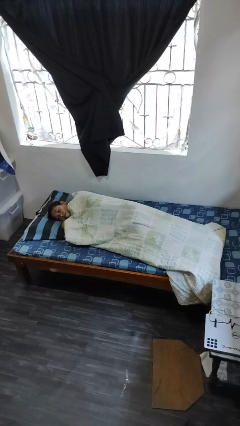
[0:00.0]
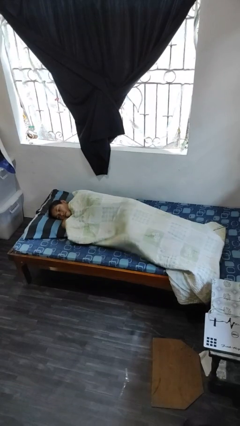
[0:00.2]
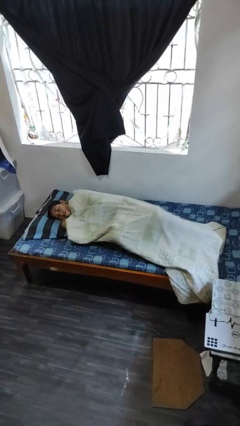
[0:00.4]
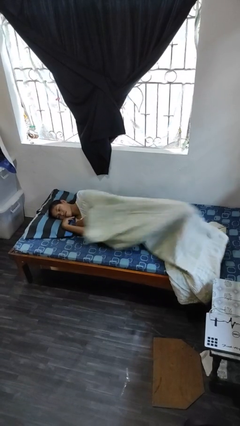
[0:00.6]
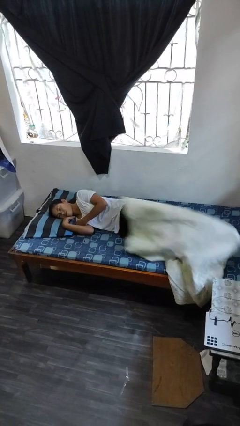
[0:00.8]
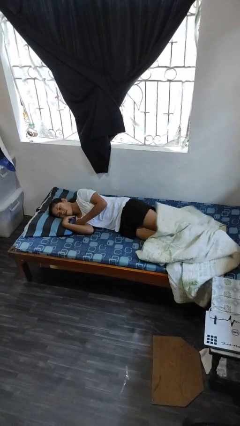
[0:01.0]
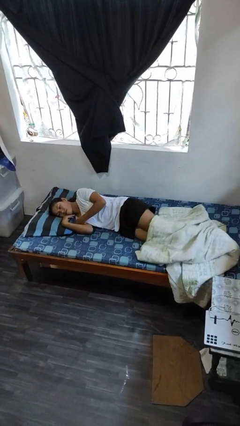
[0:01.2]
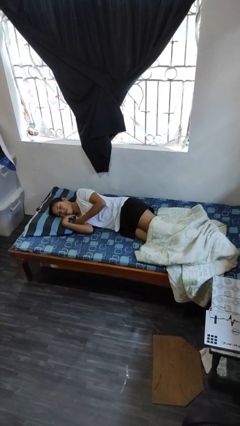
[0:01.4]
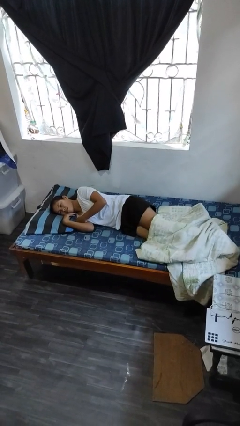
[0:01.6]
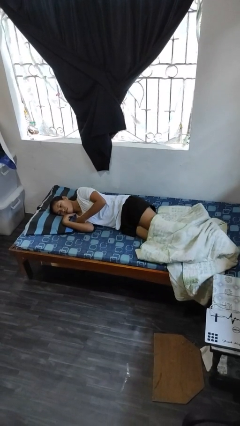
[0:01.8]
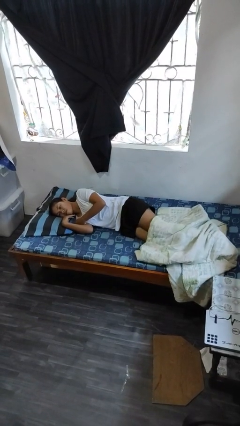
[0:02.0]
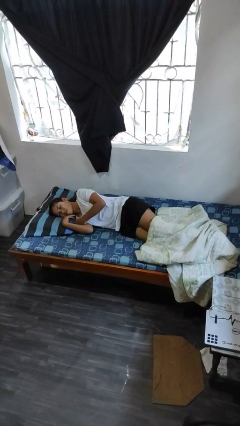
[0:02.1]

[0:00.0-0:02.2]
person uncovers with bedsheets

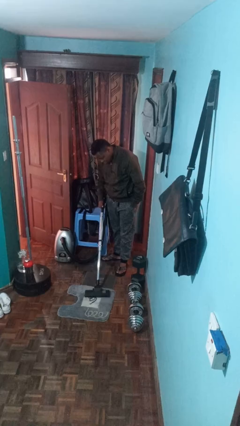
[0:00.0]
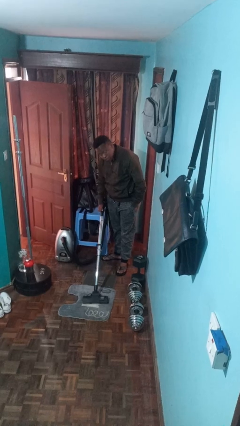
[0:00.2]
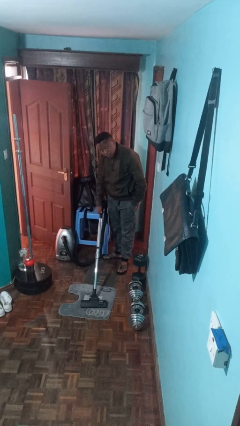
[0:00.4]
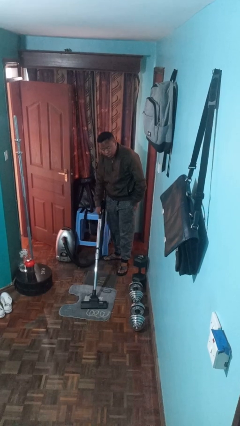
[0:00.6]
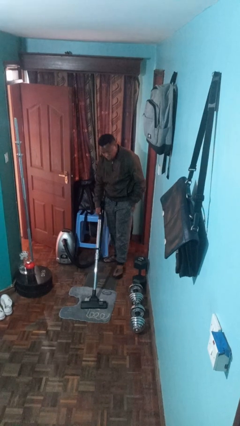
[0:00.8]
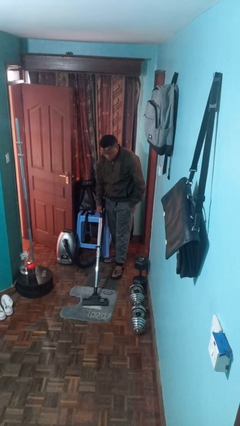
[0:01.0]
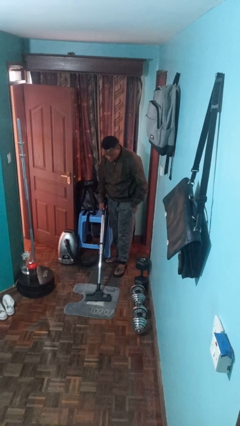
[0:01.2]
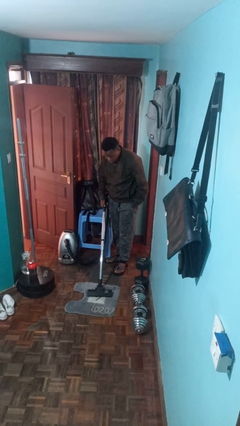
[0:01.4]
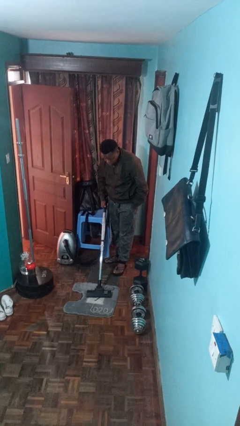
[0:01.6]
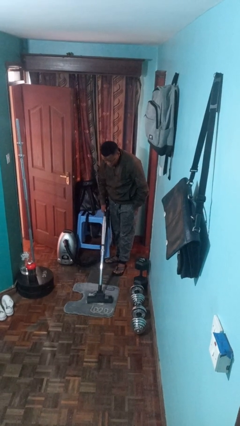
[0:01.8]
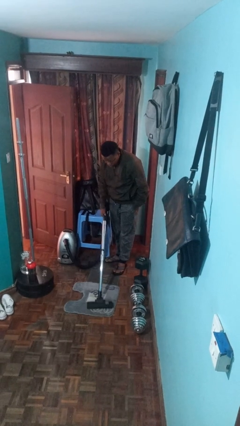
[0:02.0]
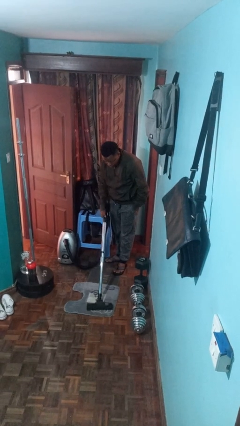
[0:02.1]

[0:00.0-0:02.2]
person vacuums carpet

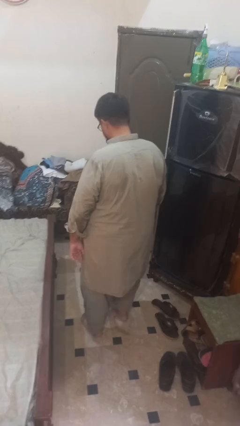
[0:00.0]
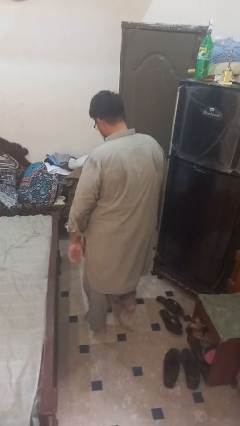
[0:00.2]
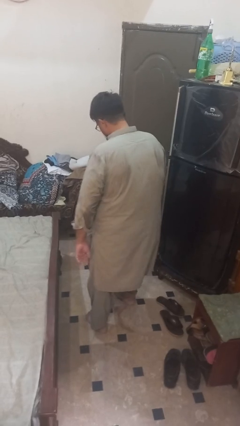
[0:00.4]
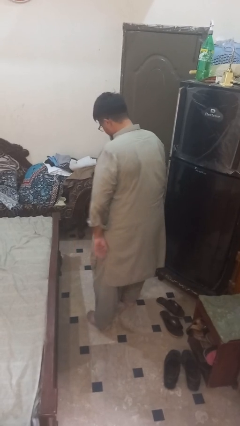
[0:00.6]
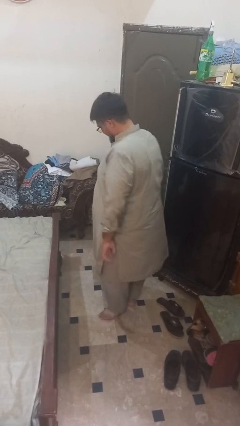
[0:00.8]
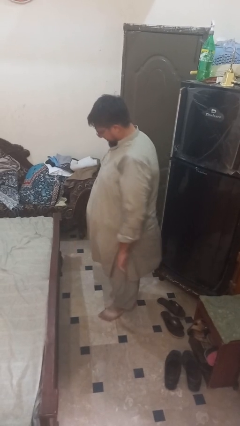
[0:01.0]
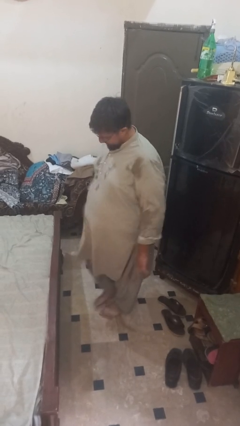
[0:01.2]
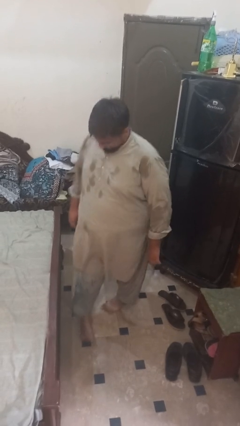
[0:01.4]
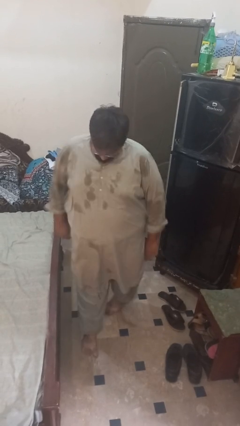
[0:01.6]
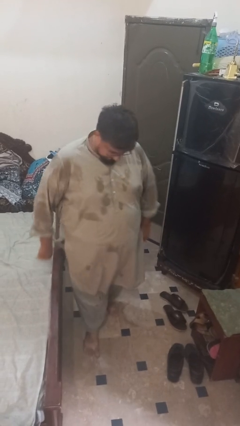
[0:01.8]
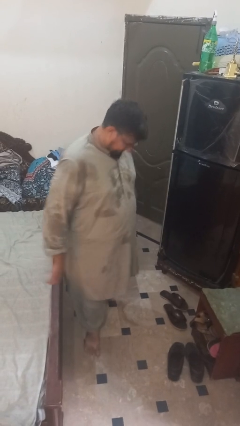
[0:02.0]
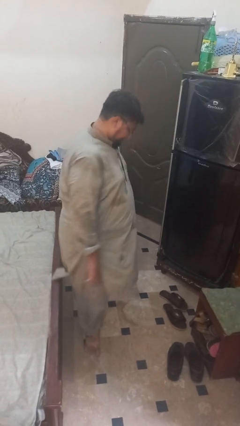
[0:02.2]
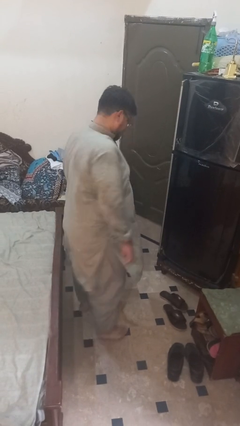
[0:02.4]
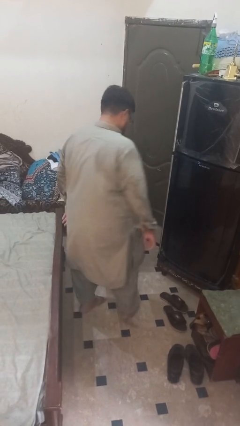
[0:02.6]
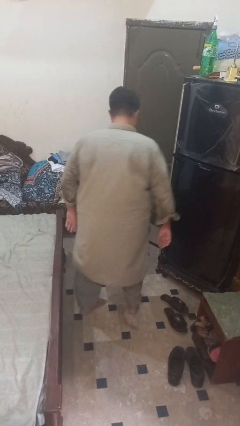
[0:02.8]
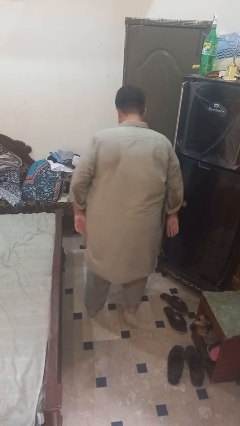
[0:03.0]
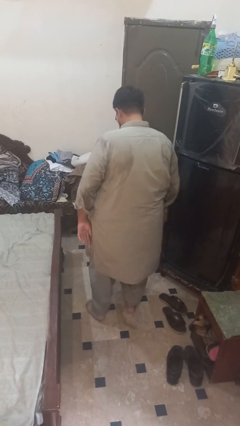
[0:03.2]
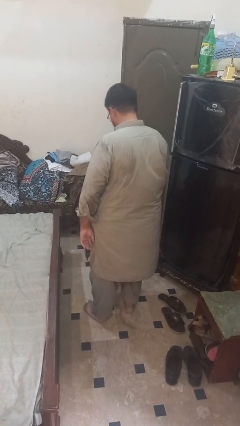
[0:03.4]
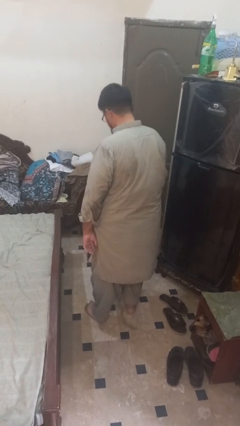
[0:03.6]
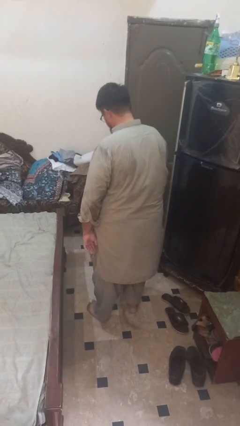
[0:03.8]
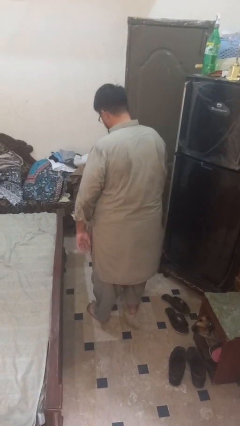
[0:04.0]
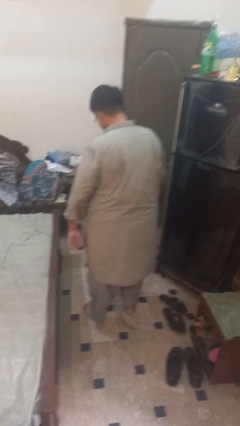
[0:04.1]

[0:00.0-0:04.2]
person twirls

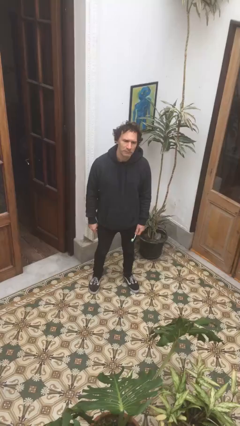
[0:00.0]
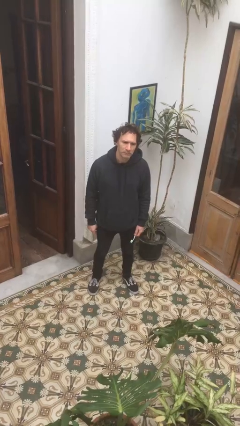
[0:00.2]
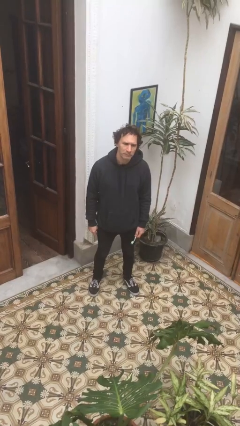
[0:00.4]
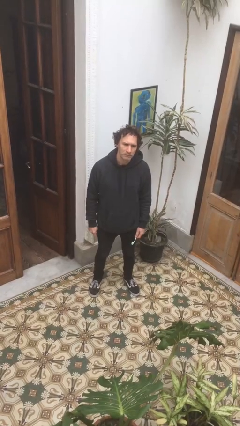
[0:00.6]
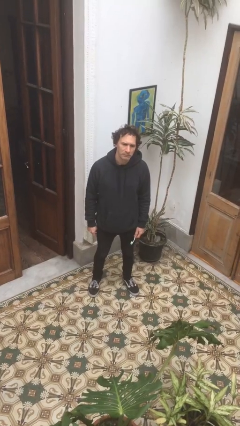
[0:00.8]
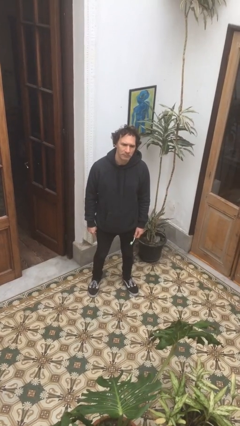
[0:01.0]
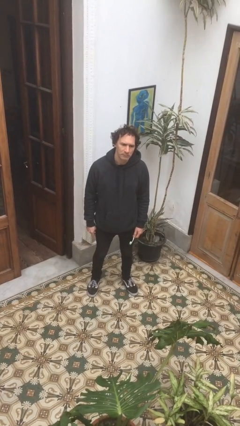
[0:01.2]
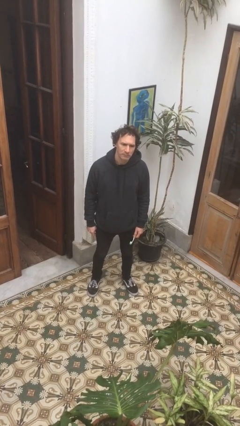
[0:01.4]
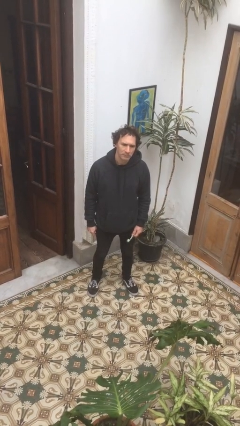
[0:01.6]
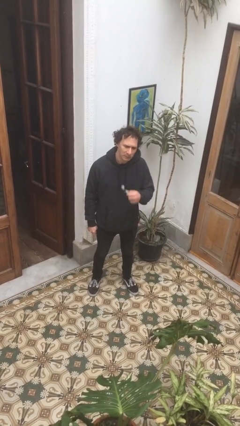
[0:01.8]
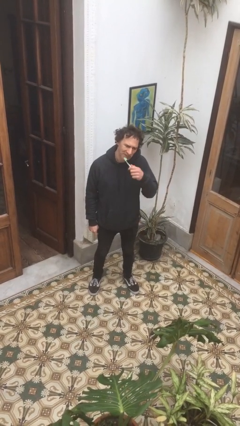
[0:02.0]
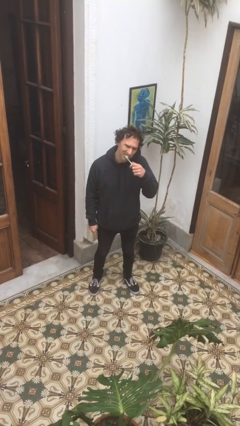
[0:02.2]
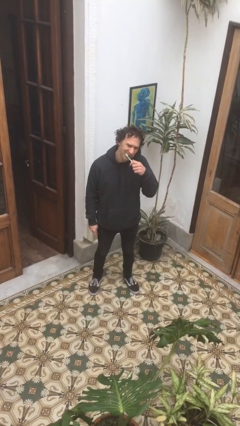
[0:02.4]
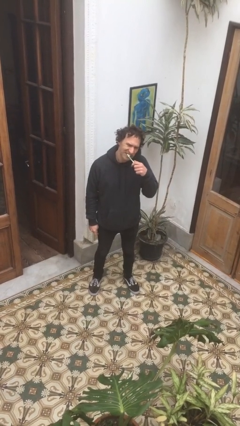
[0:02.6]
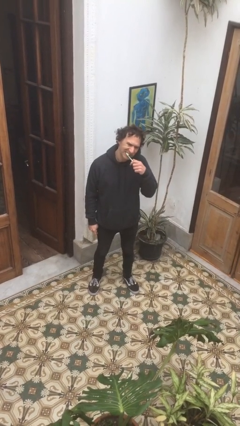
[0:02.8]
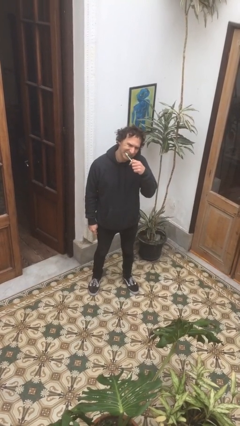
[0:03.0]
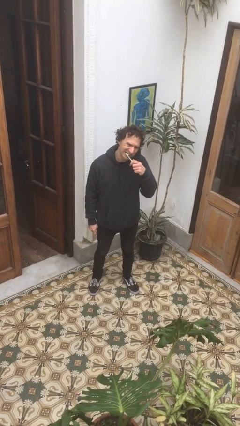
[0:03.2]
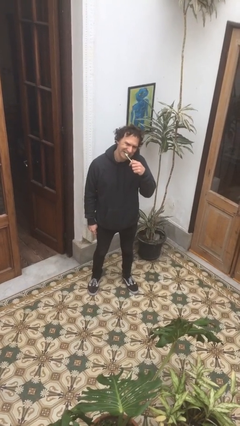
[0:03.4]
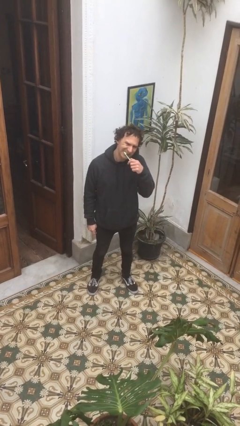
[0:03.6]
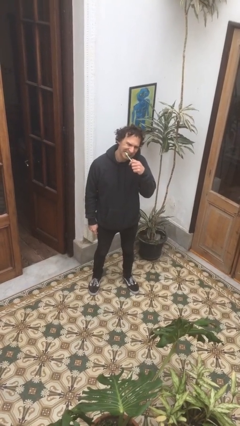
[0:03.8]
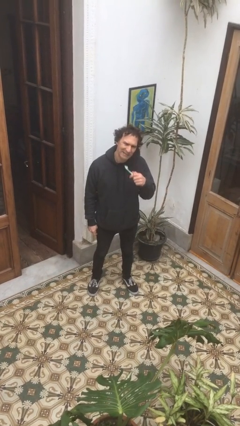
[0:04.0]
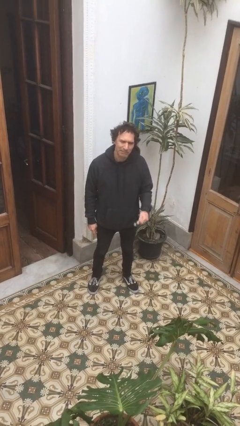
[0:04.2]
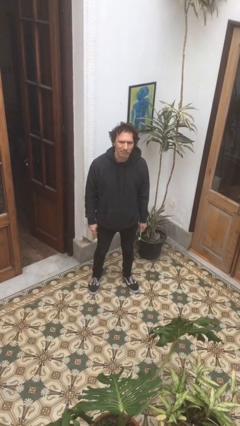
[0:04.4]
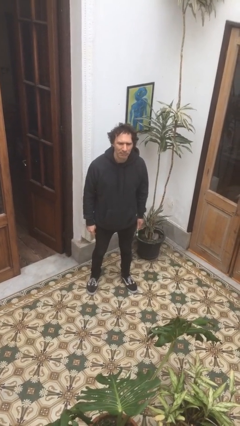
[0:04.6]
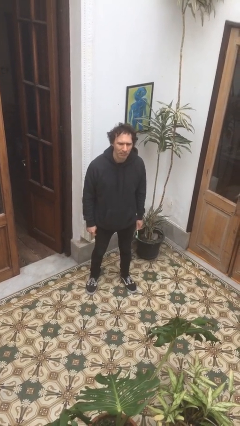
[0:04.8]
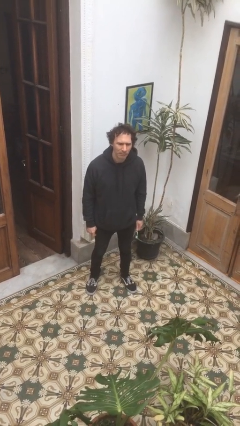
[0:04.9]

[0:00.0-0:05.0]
person brushes teeth

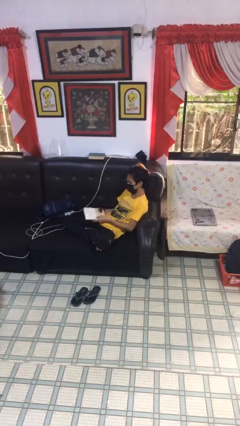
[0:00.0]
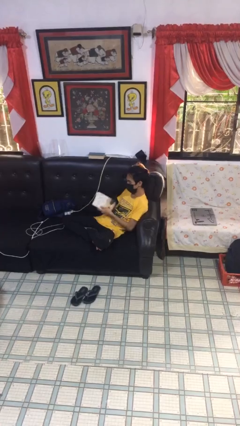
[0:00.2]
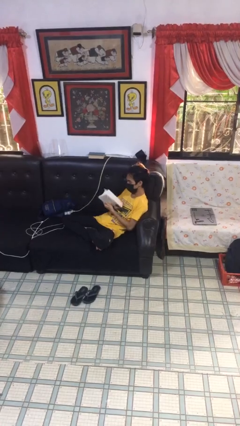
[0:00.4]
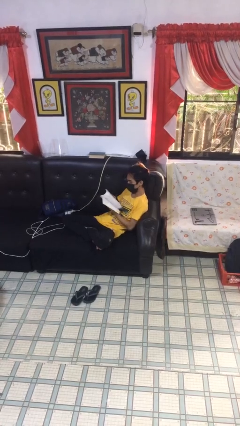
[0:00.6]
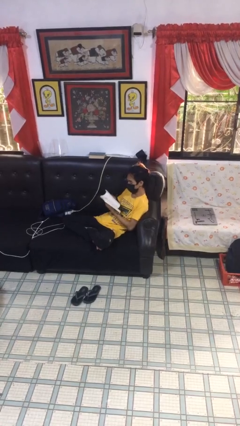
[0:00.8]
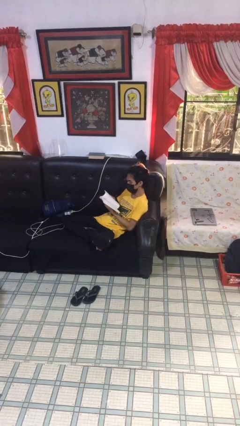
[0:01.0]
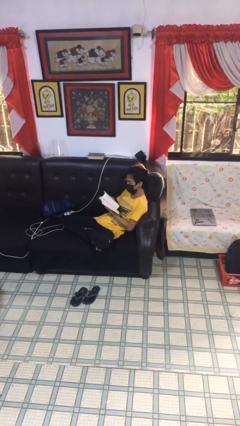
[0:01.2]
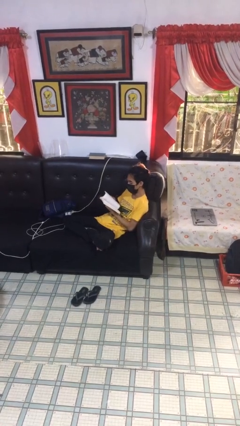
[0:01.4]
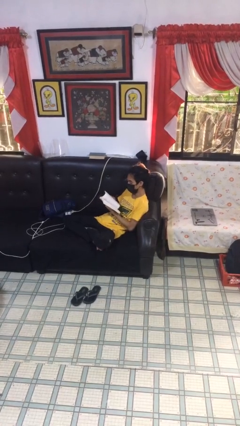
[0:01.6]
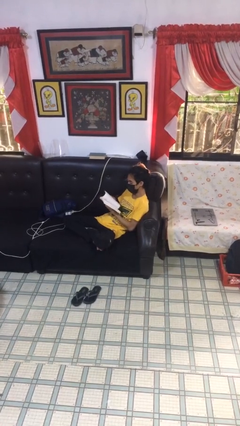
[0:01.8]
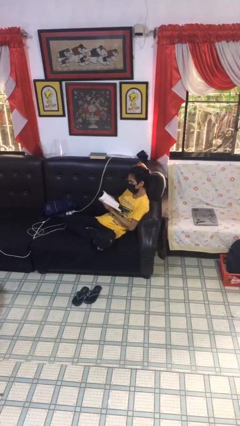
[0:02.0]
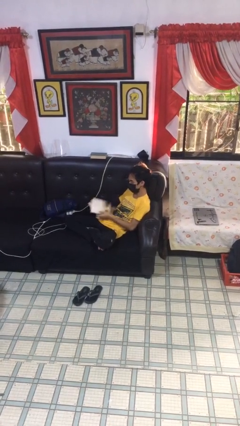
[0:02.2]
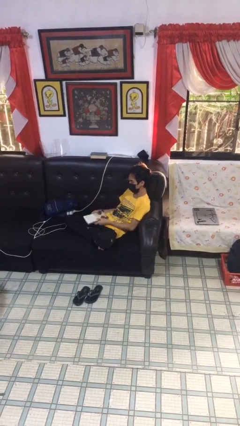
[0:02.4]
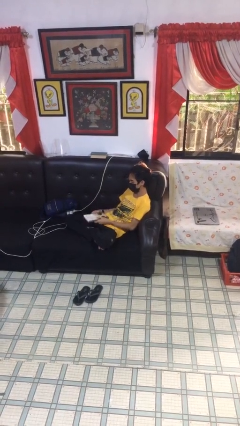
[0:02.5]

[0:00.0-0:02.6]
person reads document

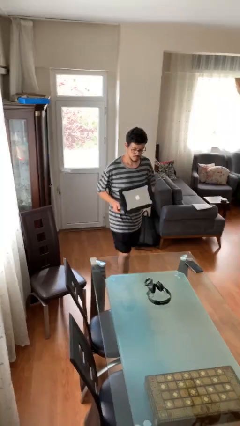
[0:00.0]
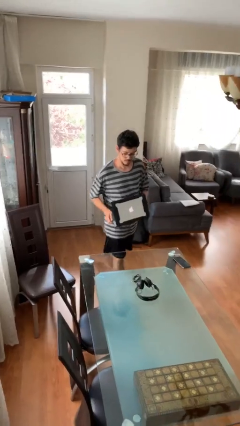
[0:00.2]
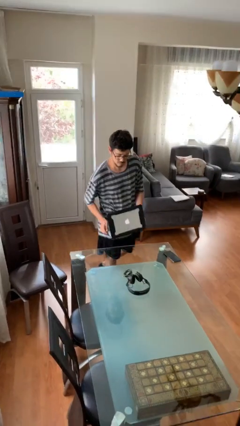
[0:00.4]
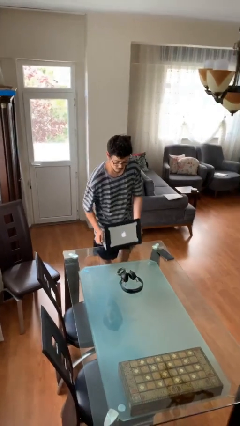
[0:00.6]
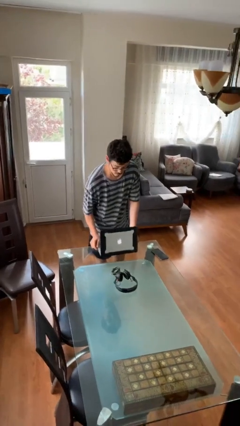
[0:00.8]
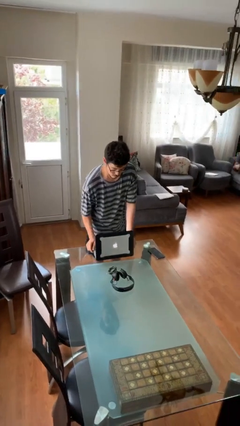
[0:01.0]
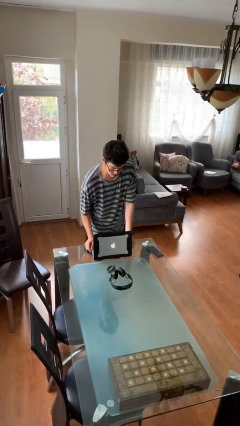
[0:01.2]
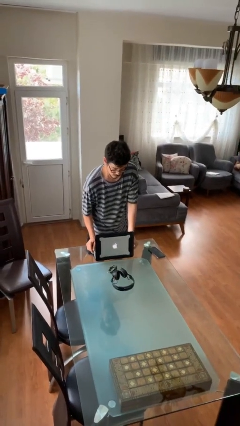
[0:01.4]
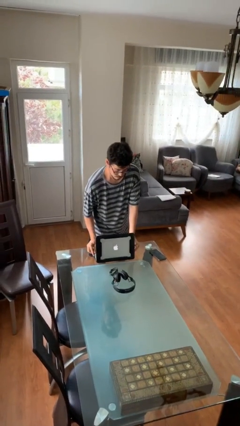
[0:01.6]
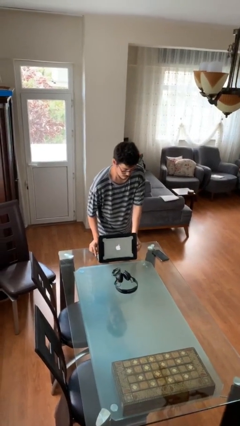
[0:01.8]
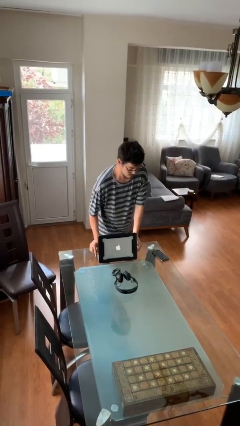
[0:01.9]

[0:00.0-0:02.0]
person puts down object on table
